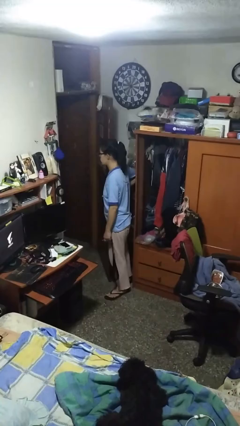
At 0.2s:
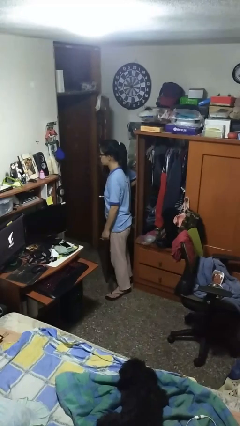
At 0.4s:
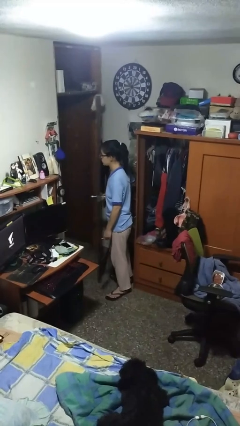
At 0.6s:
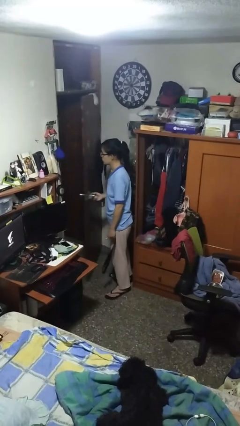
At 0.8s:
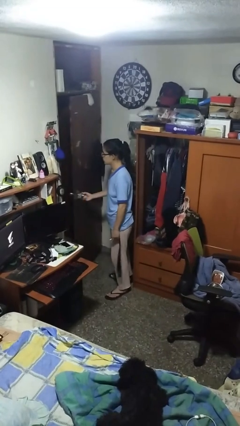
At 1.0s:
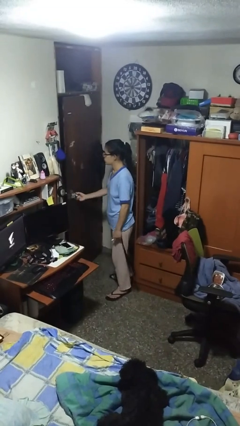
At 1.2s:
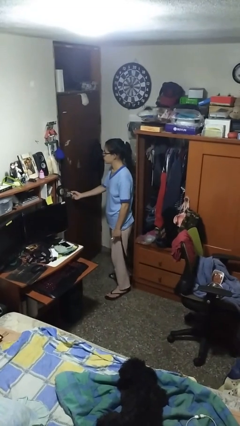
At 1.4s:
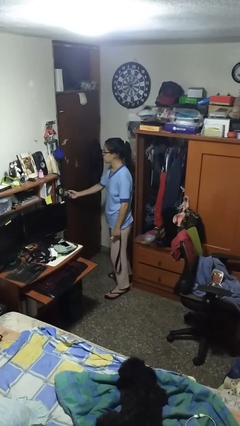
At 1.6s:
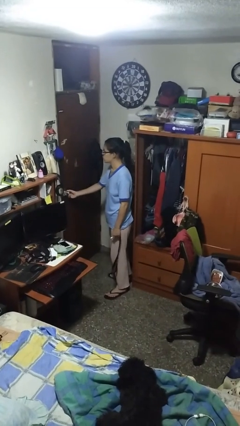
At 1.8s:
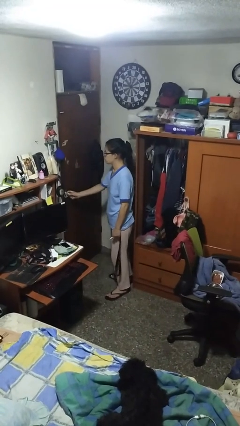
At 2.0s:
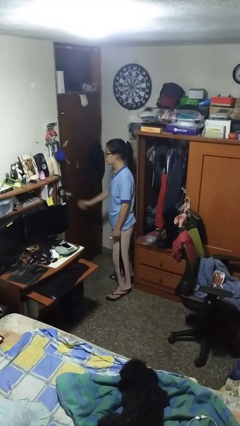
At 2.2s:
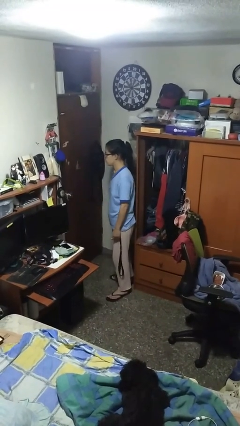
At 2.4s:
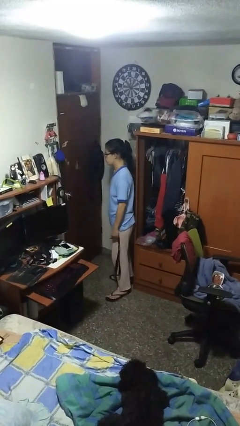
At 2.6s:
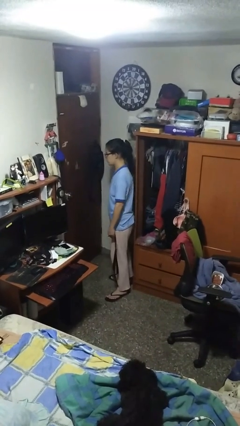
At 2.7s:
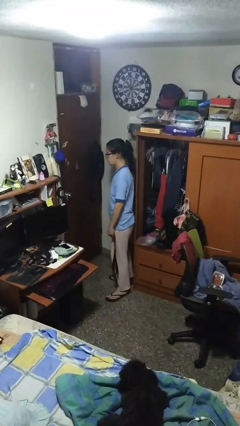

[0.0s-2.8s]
person closes facility door

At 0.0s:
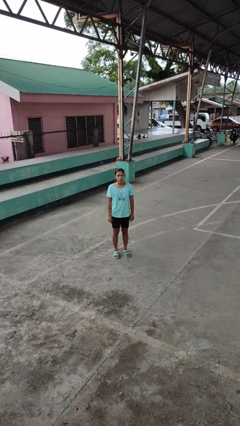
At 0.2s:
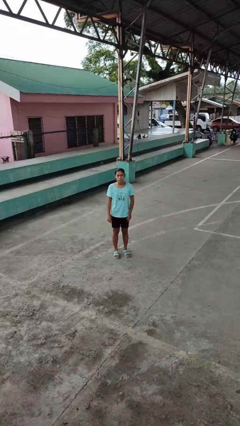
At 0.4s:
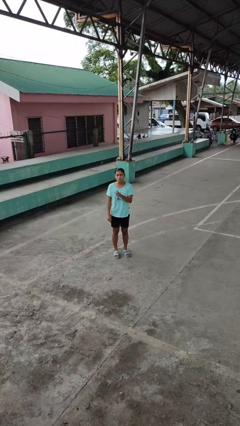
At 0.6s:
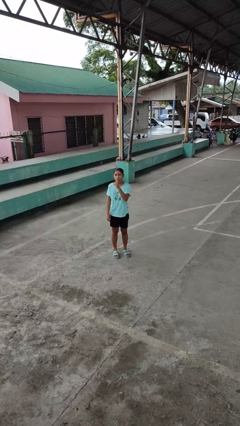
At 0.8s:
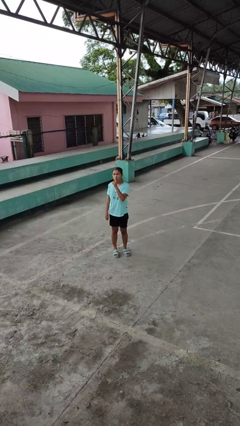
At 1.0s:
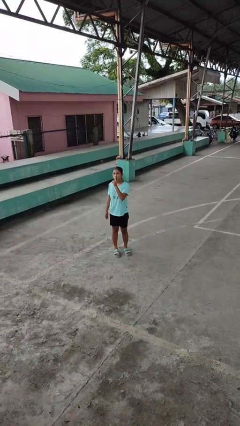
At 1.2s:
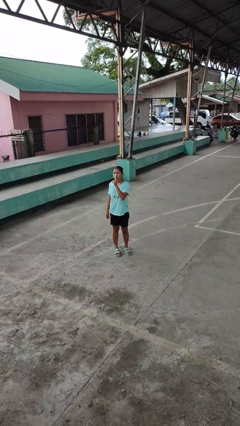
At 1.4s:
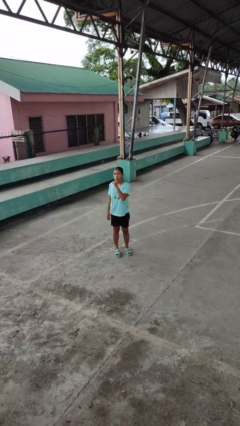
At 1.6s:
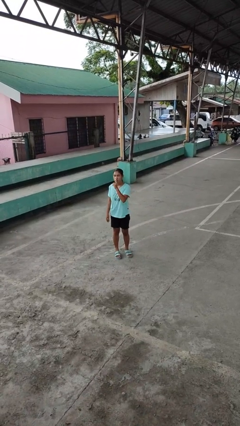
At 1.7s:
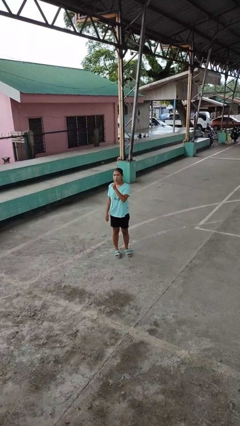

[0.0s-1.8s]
person gestures be quiet

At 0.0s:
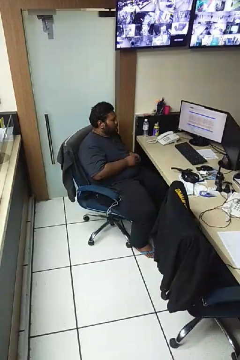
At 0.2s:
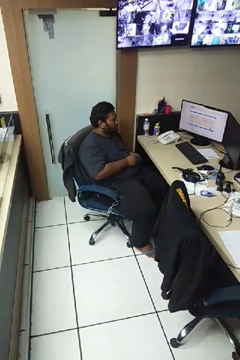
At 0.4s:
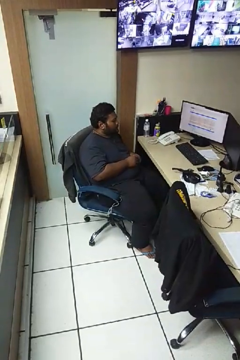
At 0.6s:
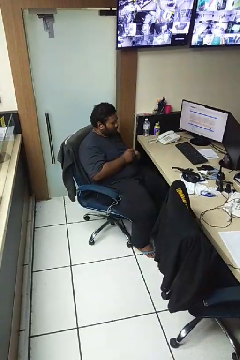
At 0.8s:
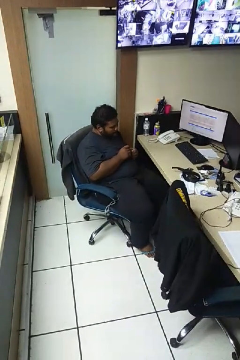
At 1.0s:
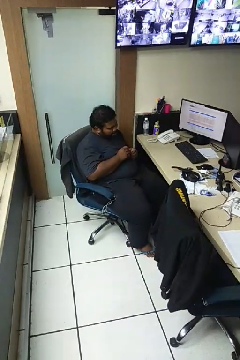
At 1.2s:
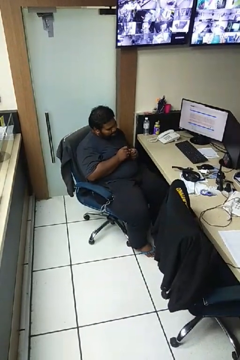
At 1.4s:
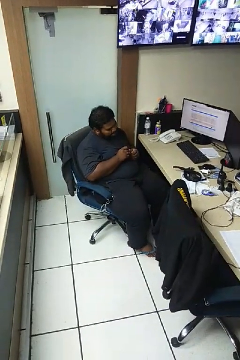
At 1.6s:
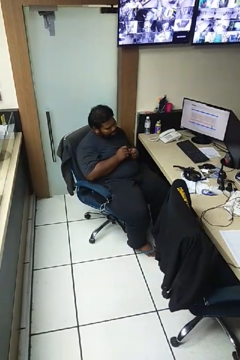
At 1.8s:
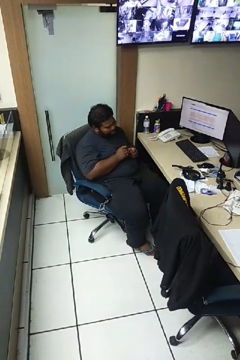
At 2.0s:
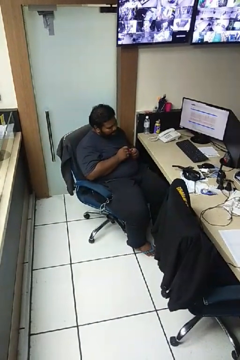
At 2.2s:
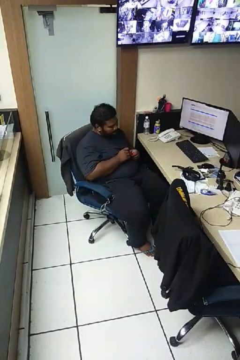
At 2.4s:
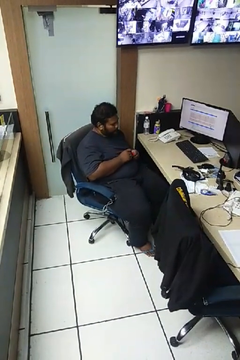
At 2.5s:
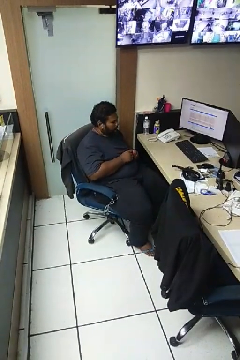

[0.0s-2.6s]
person paints fingernails

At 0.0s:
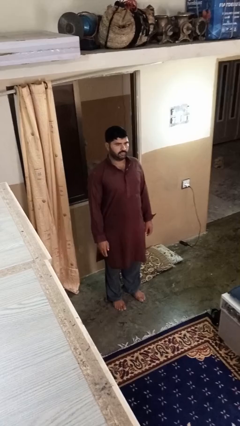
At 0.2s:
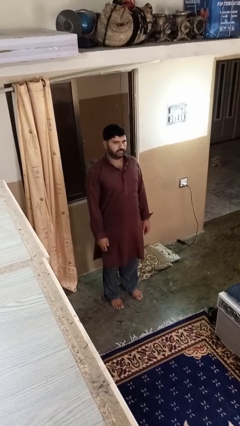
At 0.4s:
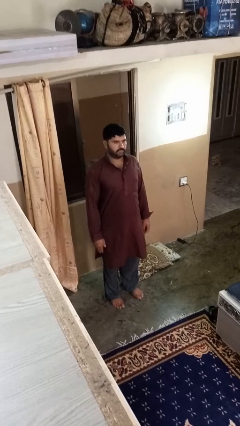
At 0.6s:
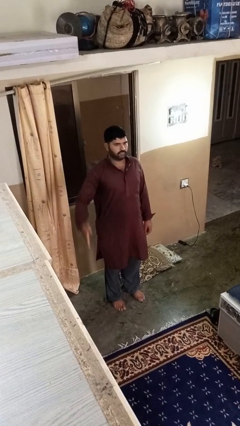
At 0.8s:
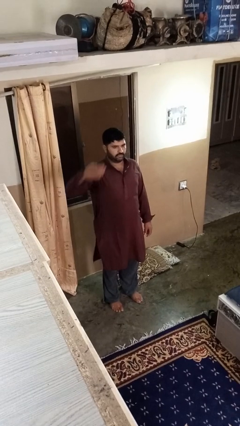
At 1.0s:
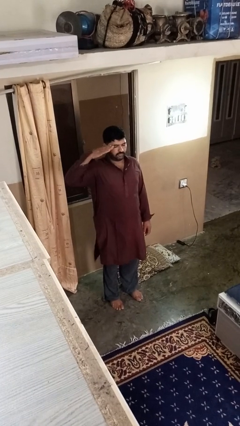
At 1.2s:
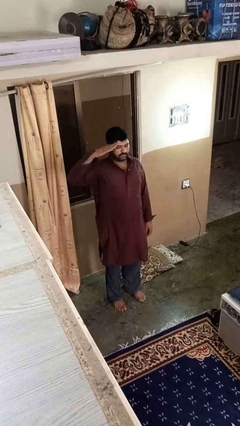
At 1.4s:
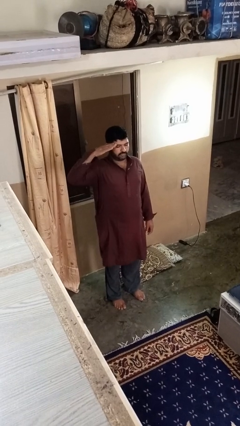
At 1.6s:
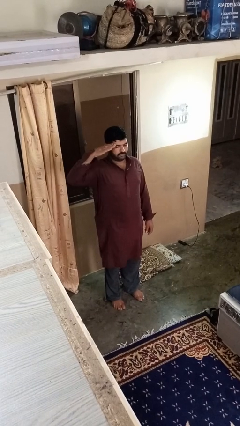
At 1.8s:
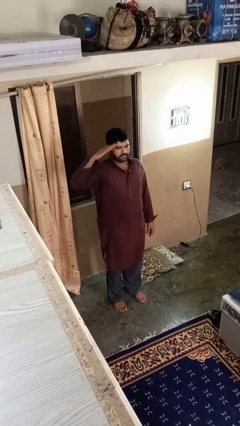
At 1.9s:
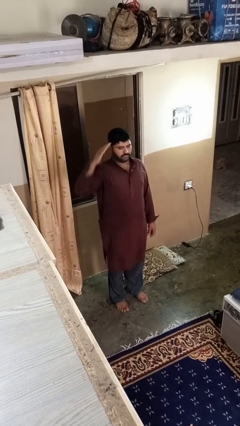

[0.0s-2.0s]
person salutes

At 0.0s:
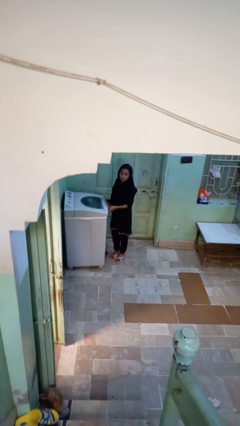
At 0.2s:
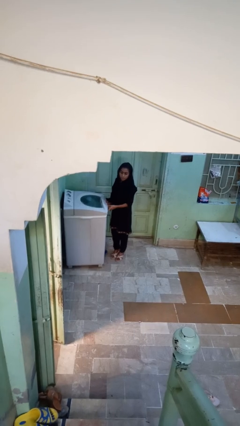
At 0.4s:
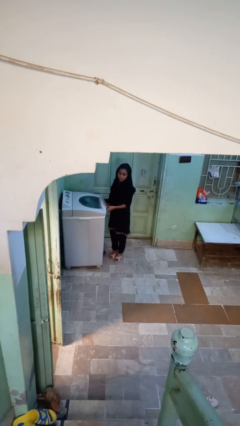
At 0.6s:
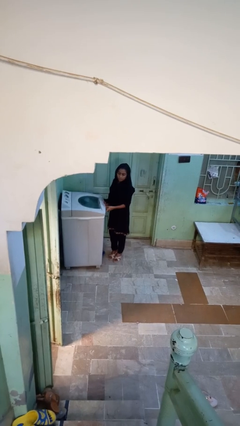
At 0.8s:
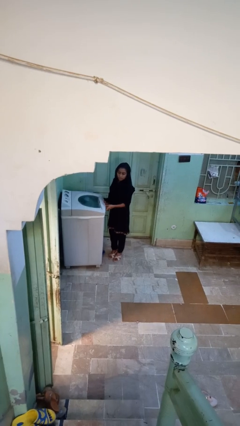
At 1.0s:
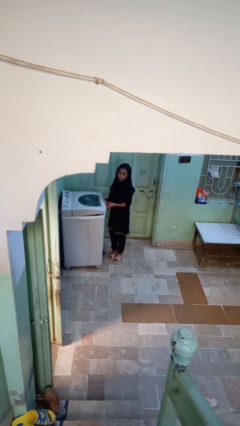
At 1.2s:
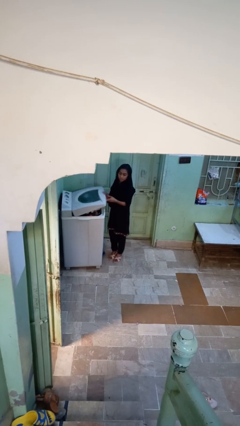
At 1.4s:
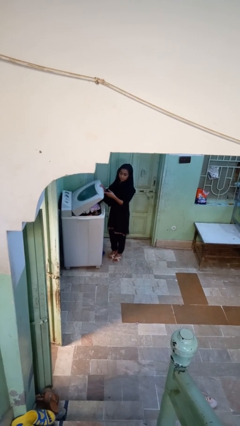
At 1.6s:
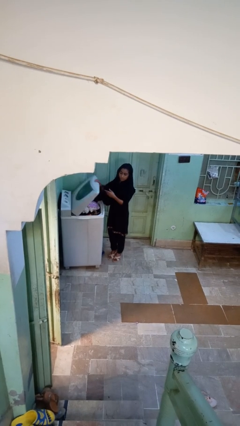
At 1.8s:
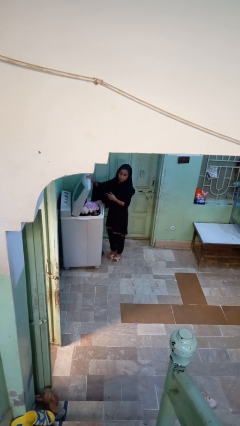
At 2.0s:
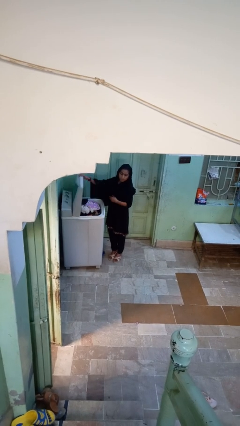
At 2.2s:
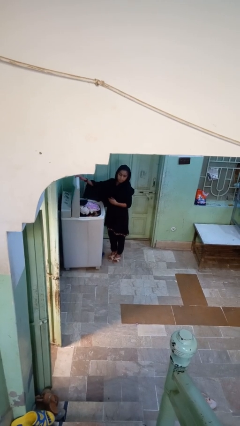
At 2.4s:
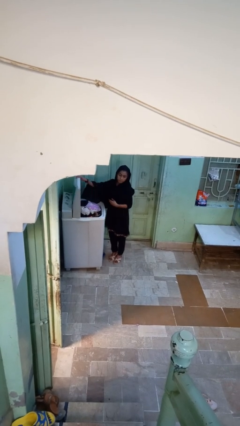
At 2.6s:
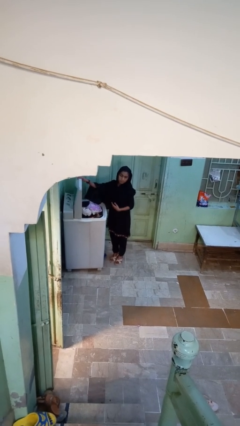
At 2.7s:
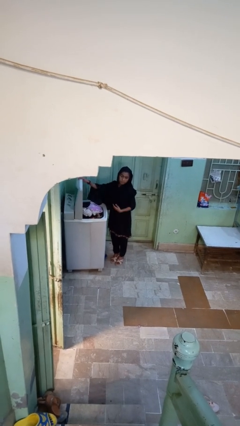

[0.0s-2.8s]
person opens clothes washer

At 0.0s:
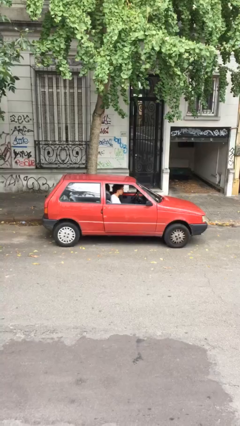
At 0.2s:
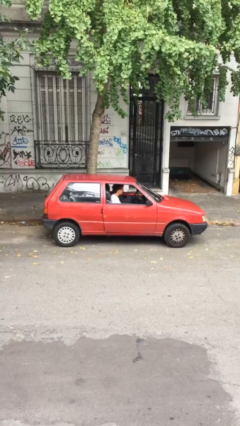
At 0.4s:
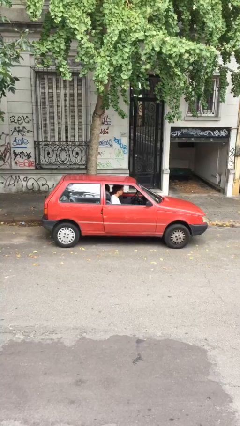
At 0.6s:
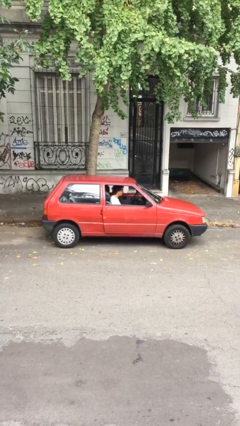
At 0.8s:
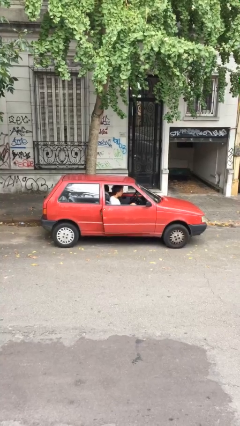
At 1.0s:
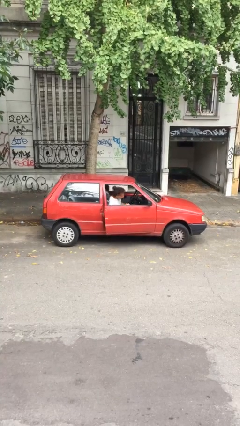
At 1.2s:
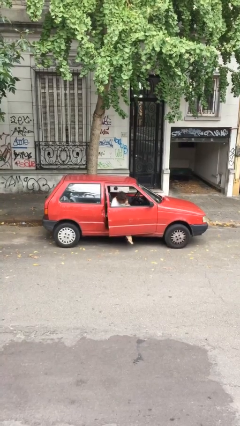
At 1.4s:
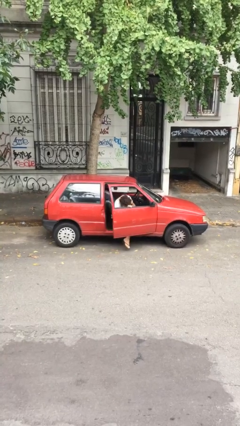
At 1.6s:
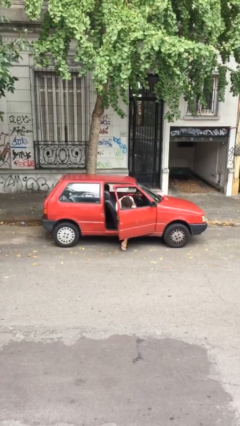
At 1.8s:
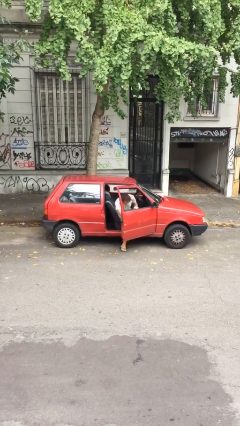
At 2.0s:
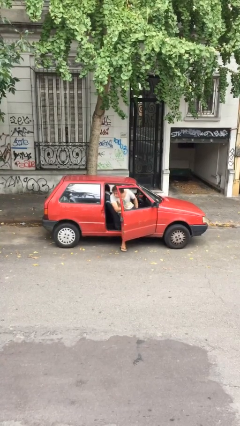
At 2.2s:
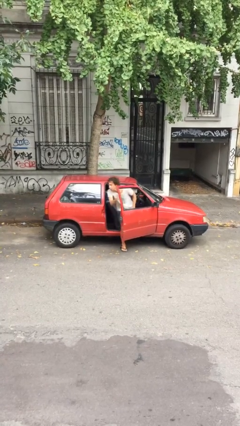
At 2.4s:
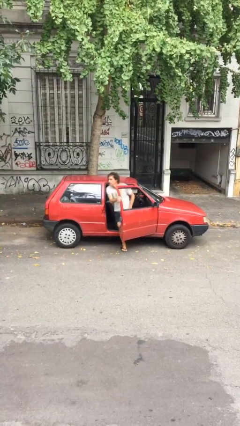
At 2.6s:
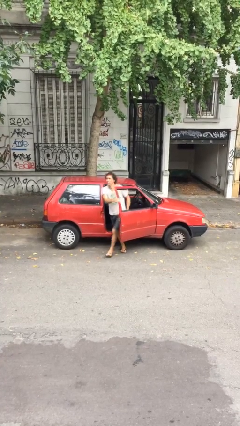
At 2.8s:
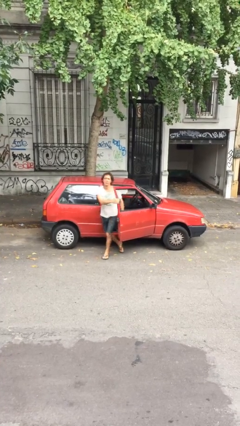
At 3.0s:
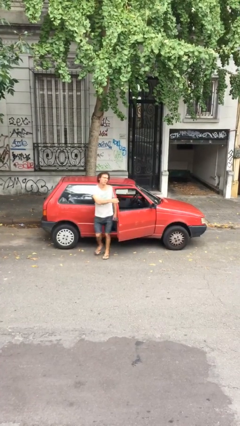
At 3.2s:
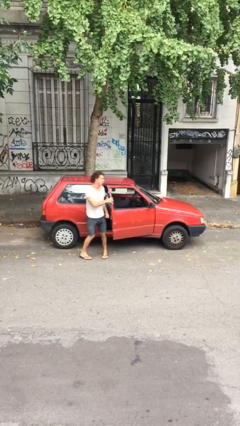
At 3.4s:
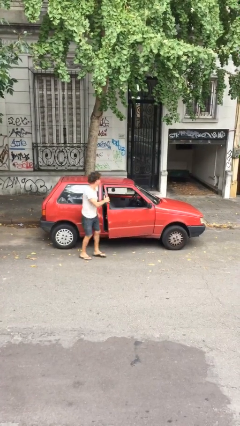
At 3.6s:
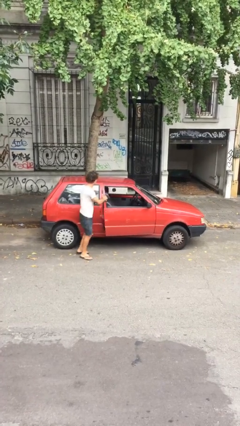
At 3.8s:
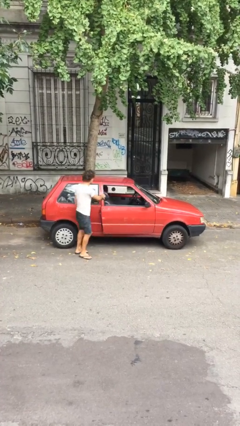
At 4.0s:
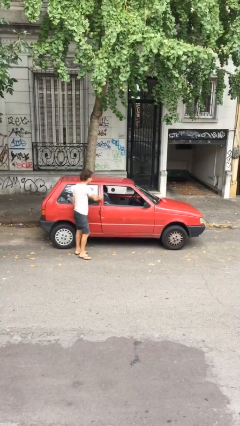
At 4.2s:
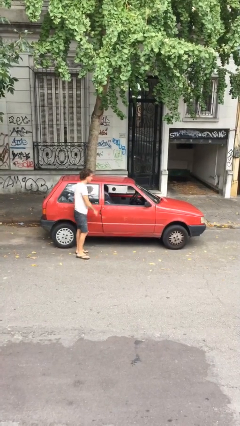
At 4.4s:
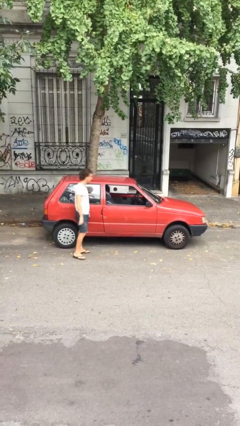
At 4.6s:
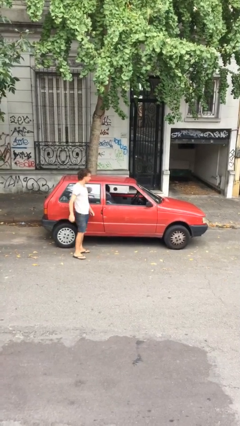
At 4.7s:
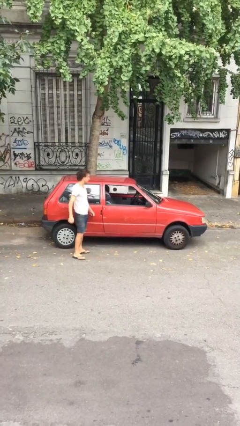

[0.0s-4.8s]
car drops off person

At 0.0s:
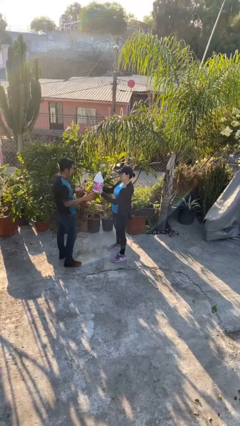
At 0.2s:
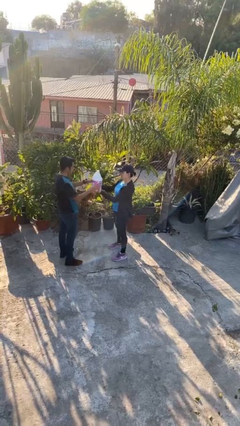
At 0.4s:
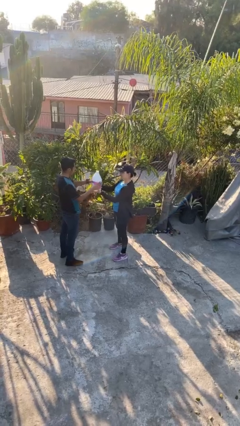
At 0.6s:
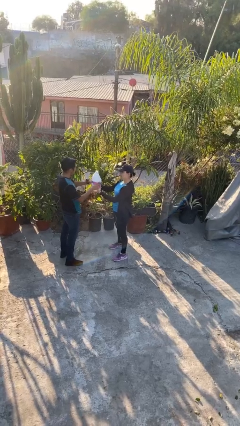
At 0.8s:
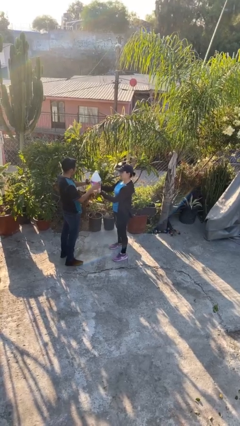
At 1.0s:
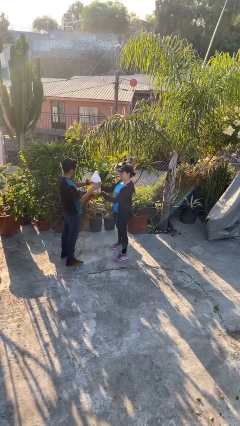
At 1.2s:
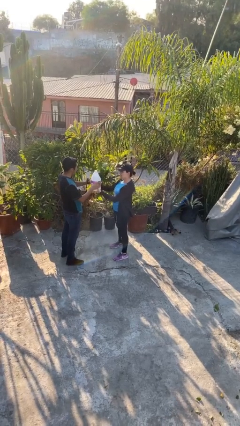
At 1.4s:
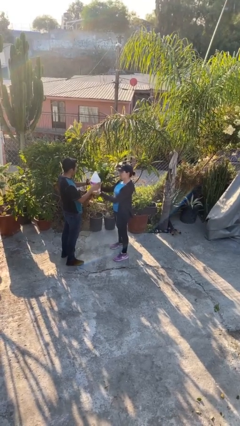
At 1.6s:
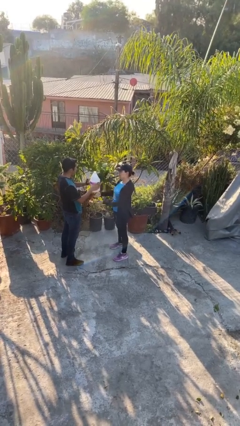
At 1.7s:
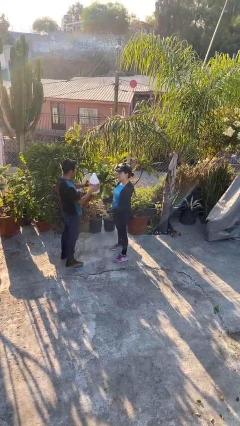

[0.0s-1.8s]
person transfers object to person
